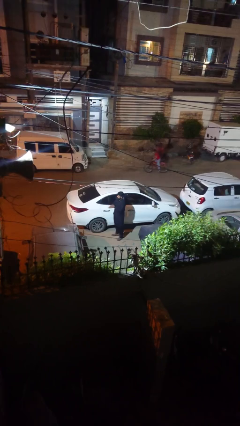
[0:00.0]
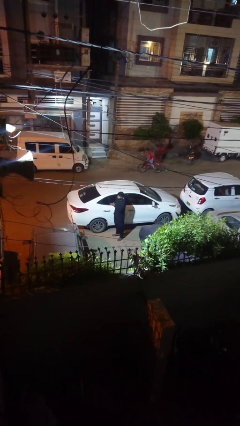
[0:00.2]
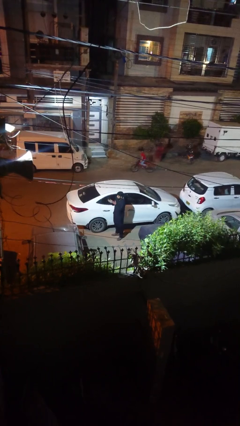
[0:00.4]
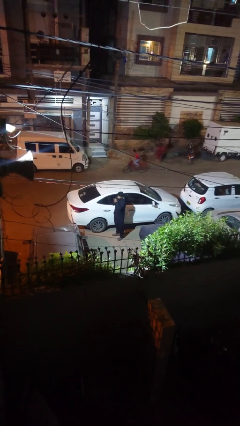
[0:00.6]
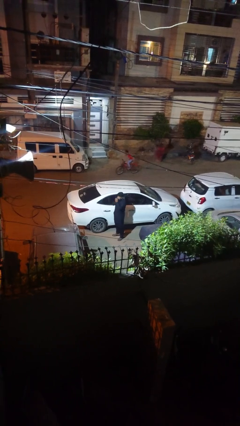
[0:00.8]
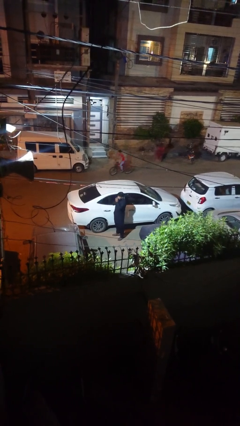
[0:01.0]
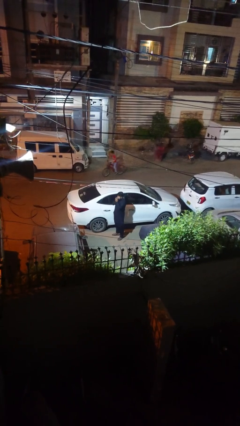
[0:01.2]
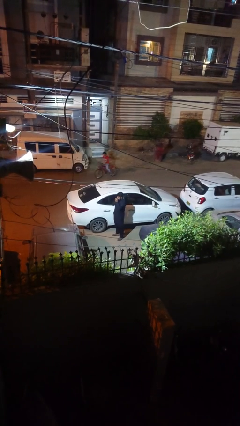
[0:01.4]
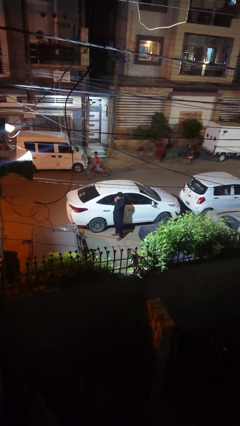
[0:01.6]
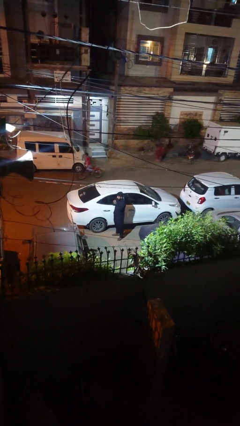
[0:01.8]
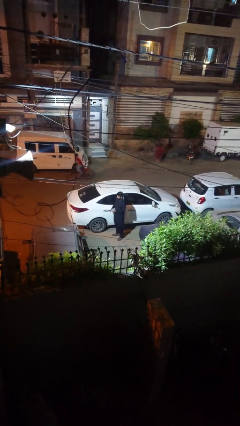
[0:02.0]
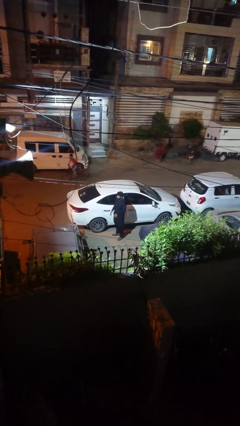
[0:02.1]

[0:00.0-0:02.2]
person blows into hands

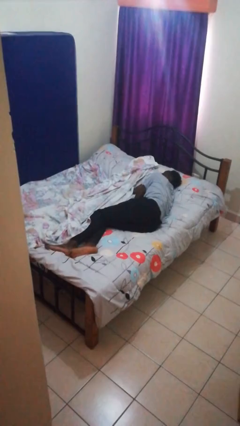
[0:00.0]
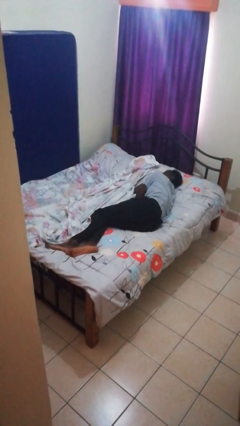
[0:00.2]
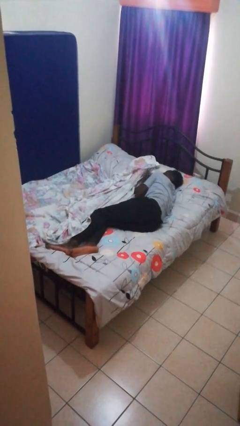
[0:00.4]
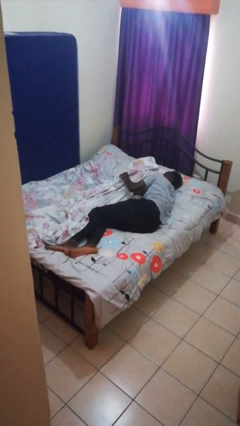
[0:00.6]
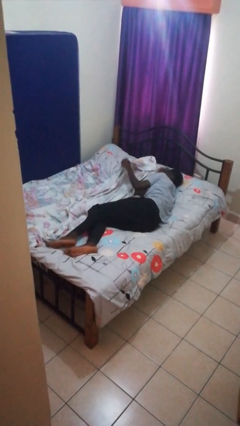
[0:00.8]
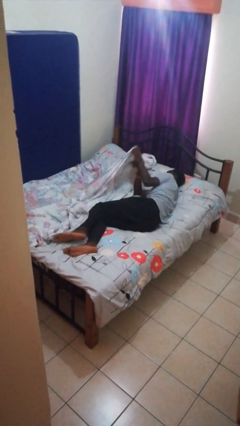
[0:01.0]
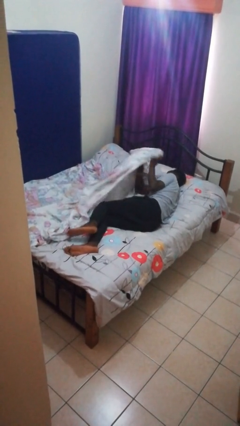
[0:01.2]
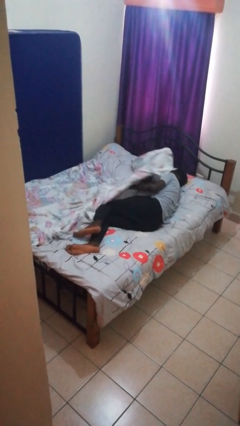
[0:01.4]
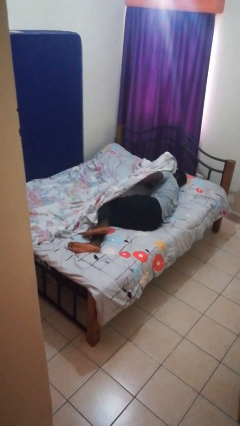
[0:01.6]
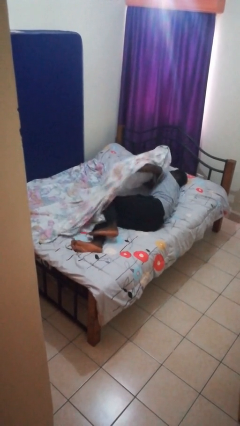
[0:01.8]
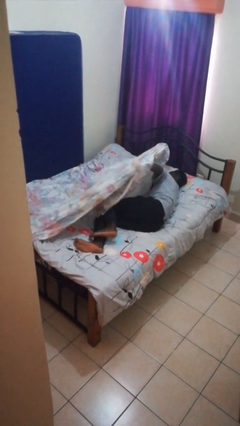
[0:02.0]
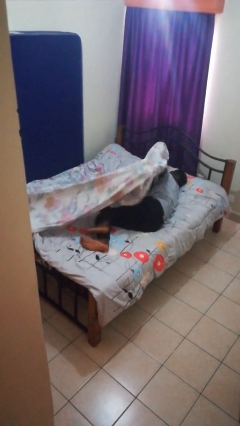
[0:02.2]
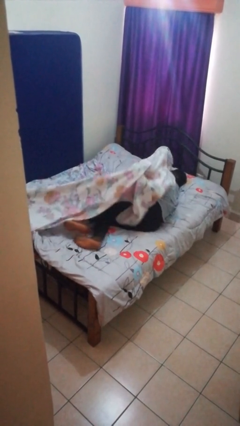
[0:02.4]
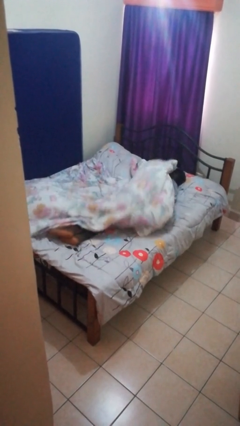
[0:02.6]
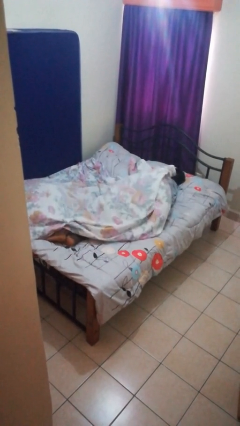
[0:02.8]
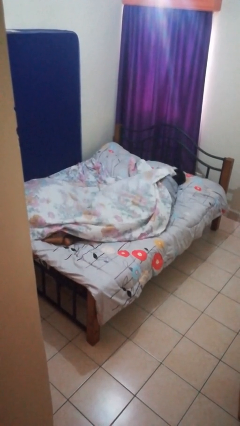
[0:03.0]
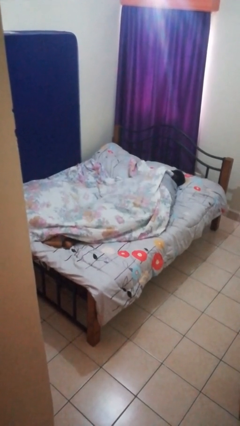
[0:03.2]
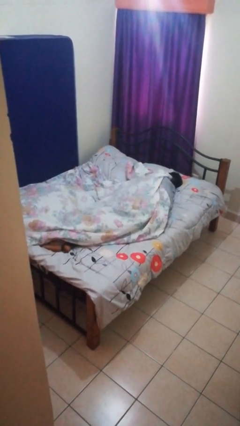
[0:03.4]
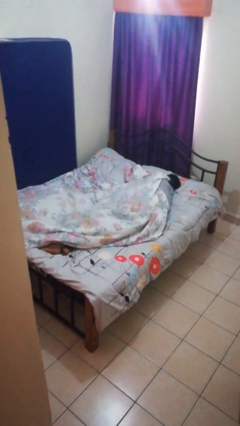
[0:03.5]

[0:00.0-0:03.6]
person covers with bedsheets

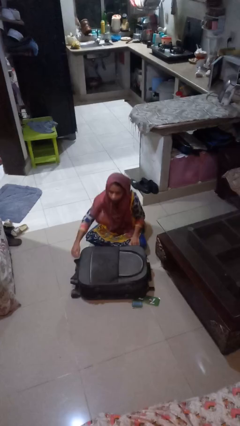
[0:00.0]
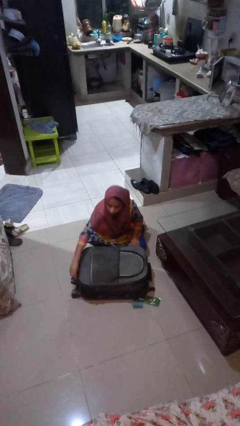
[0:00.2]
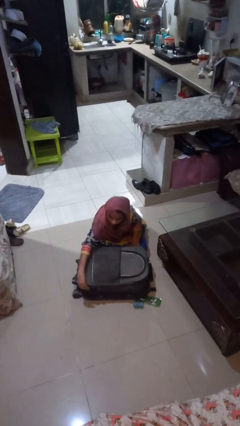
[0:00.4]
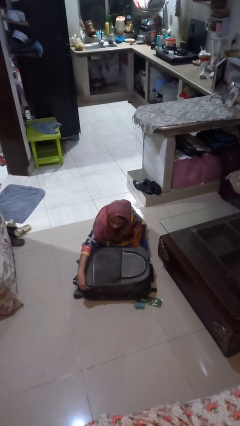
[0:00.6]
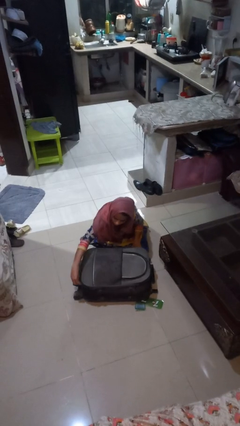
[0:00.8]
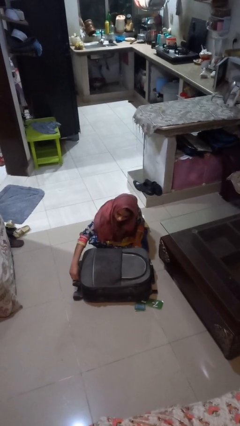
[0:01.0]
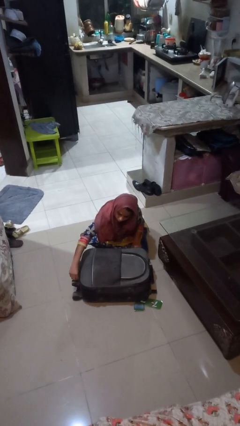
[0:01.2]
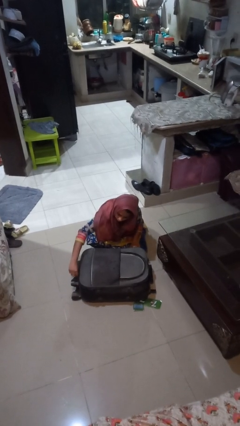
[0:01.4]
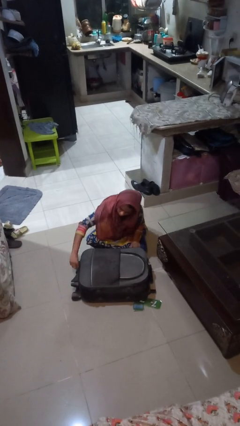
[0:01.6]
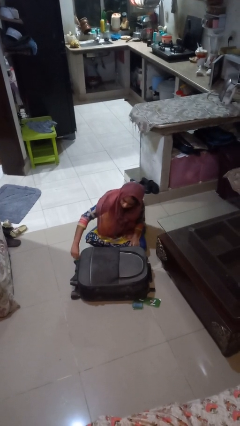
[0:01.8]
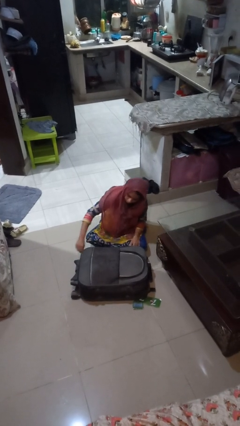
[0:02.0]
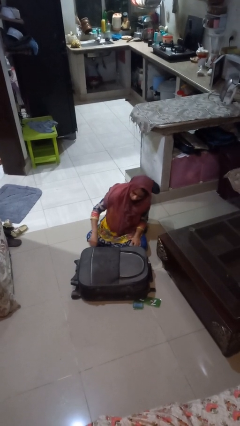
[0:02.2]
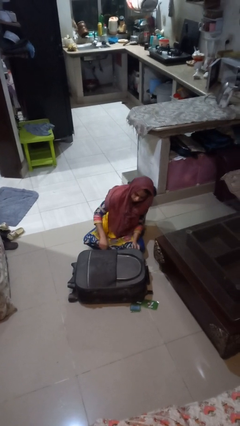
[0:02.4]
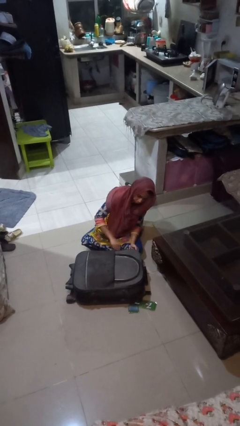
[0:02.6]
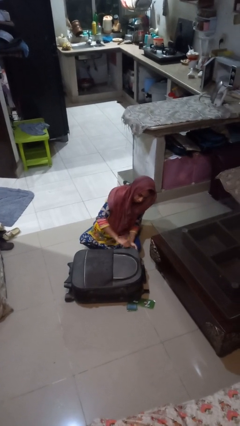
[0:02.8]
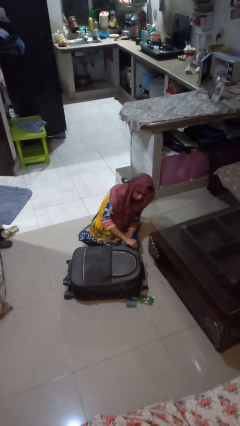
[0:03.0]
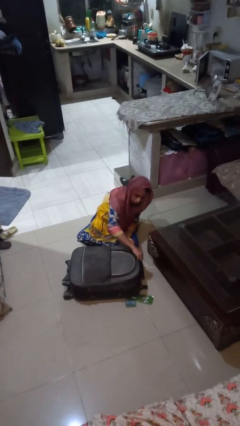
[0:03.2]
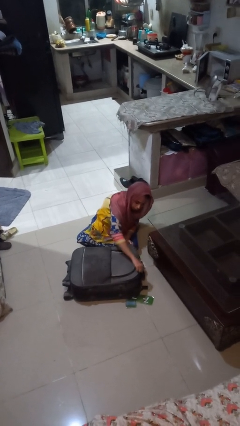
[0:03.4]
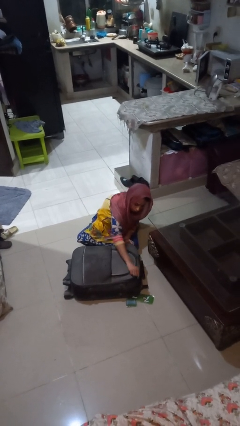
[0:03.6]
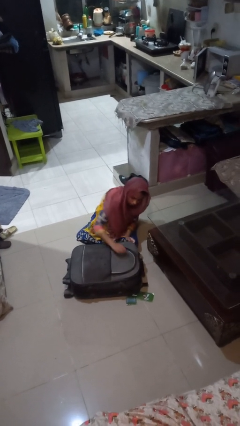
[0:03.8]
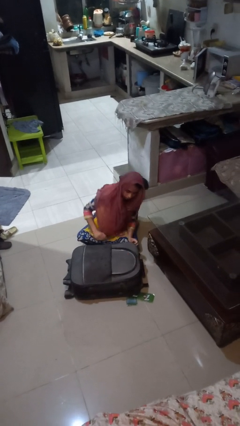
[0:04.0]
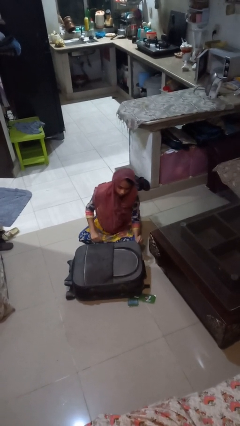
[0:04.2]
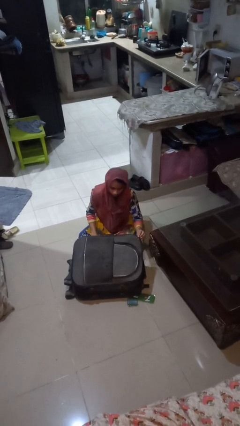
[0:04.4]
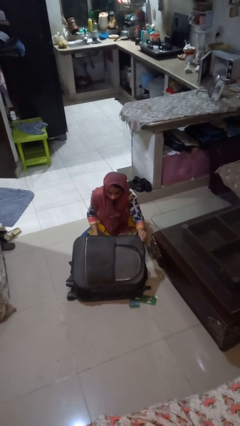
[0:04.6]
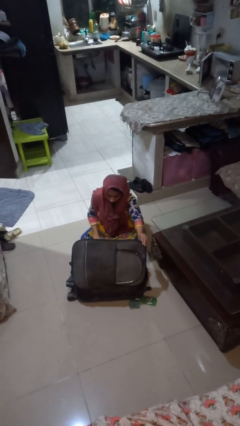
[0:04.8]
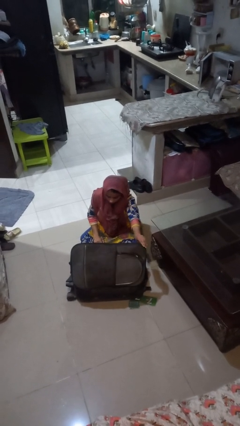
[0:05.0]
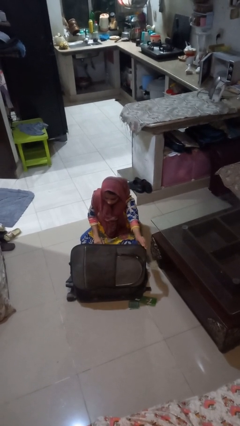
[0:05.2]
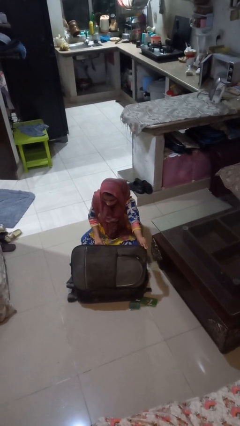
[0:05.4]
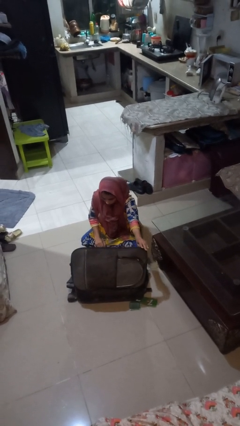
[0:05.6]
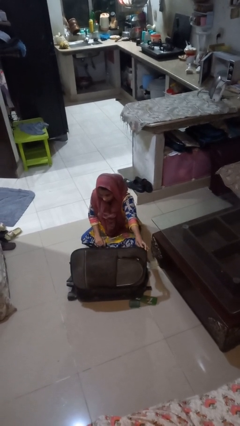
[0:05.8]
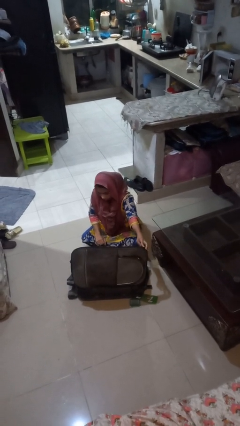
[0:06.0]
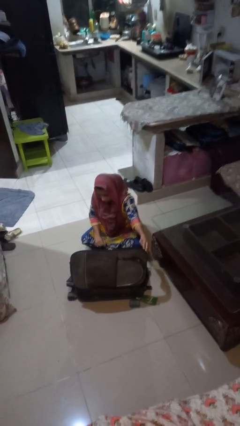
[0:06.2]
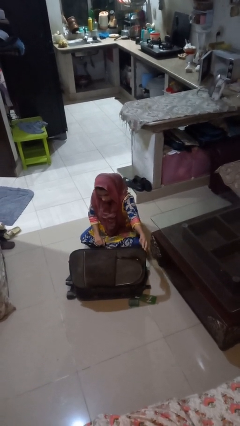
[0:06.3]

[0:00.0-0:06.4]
person opens suitcase

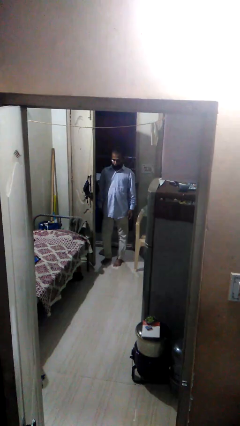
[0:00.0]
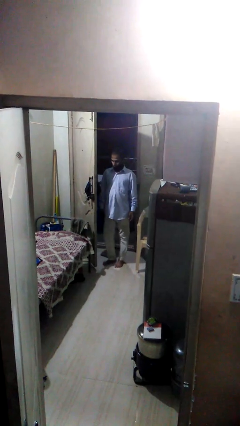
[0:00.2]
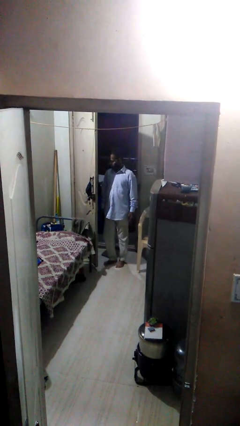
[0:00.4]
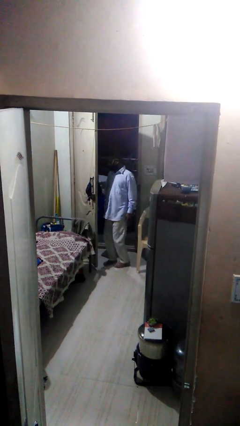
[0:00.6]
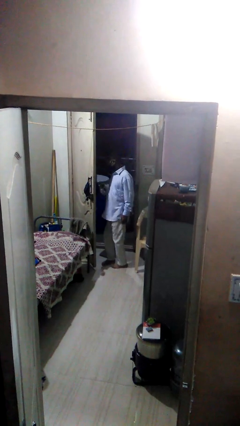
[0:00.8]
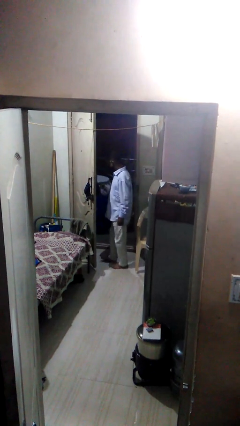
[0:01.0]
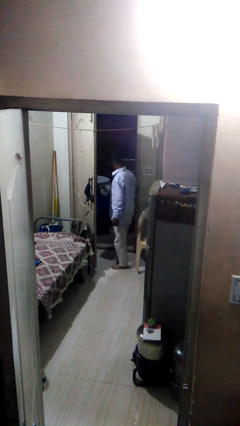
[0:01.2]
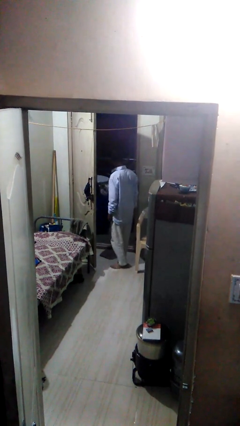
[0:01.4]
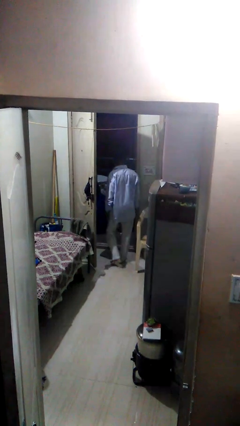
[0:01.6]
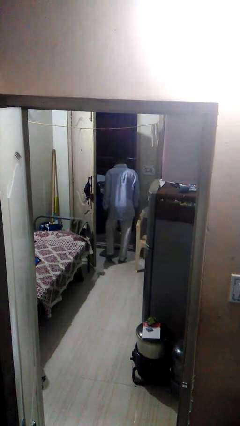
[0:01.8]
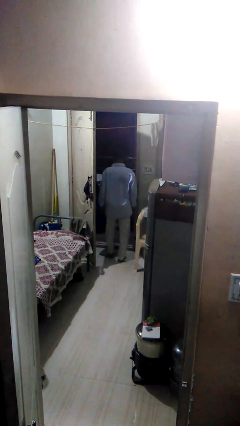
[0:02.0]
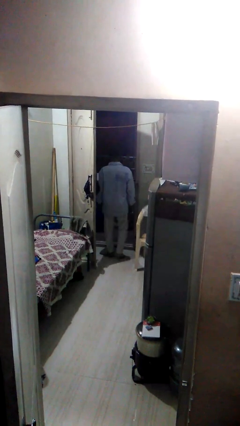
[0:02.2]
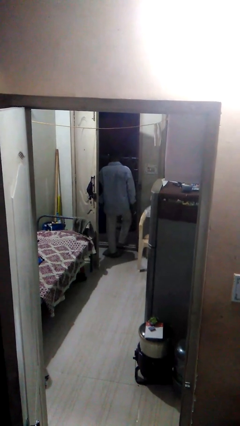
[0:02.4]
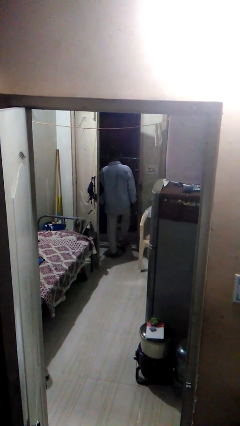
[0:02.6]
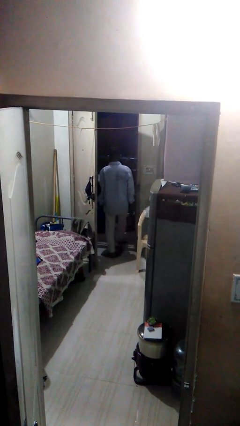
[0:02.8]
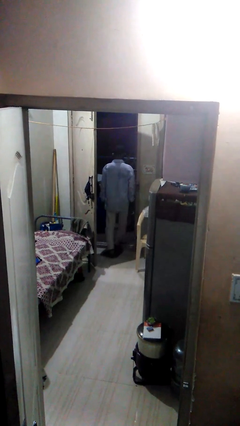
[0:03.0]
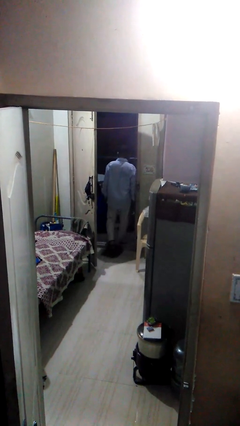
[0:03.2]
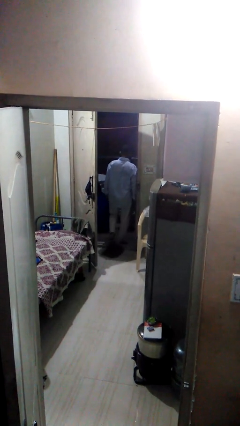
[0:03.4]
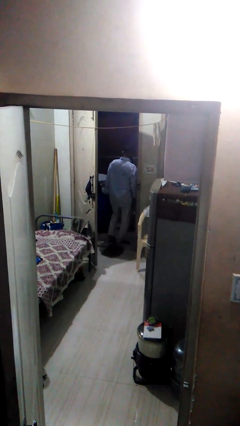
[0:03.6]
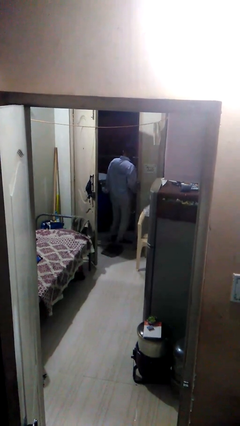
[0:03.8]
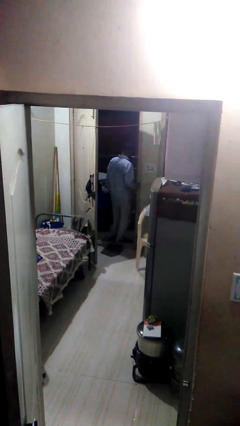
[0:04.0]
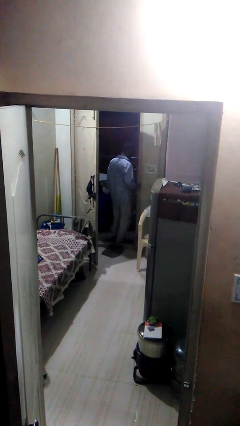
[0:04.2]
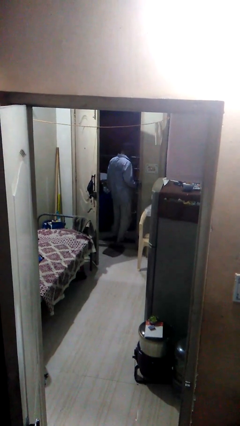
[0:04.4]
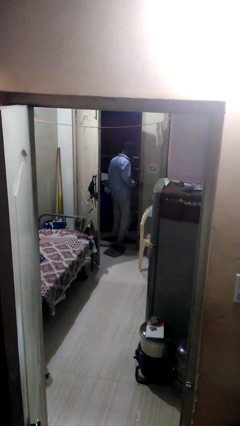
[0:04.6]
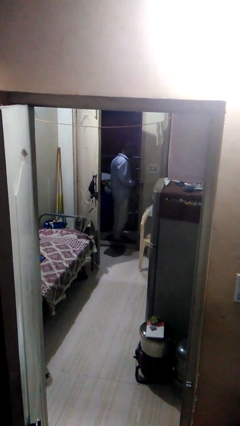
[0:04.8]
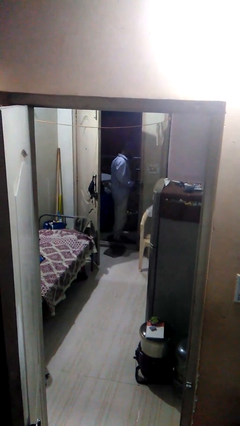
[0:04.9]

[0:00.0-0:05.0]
person exits scene through structure
